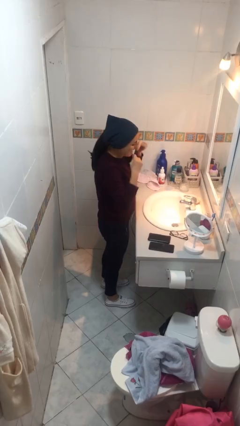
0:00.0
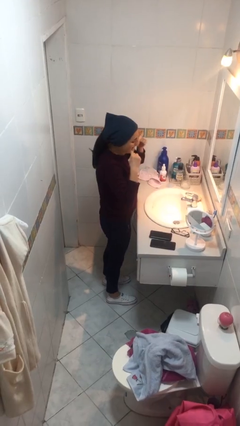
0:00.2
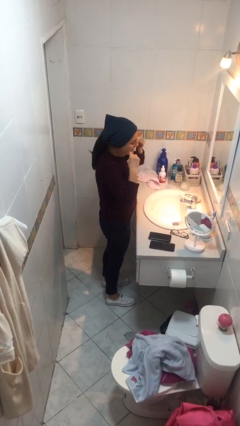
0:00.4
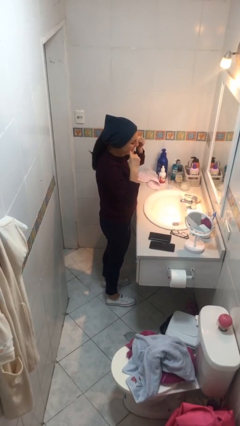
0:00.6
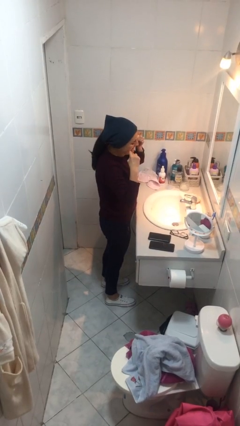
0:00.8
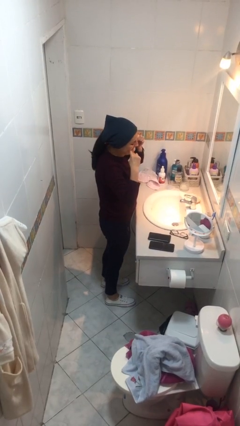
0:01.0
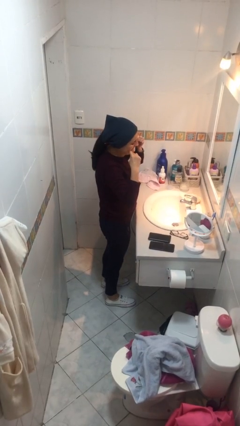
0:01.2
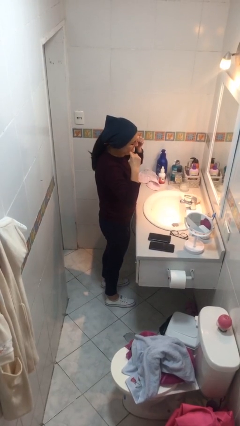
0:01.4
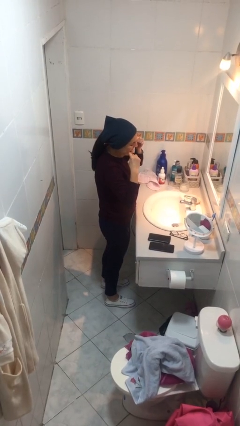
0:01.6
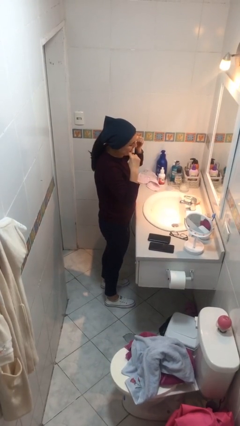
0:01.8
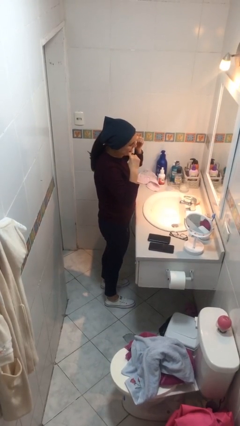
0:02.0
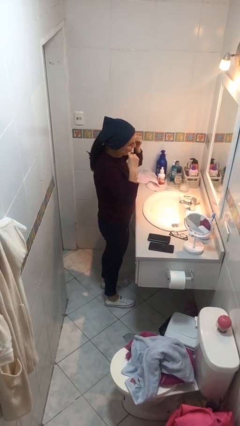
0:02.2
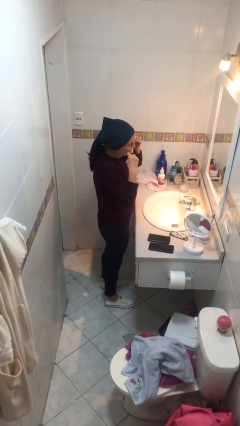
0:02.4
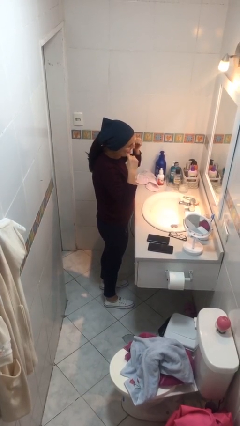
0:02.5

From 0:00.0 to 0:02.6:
person flosses

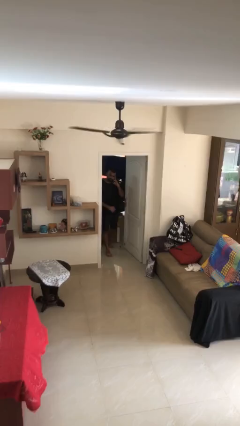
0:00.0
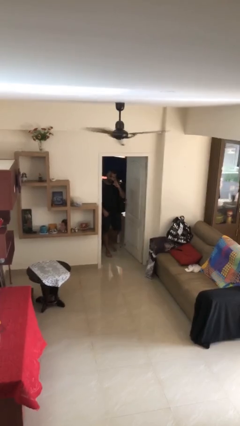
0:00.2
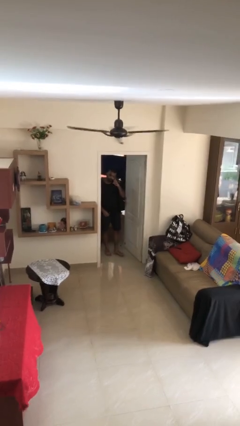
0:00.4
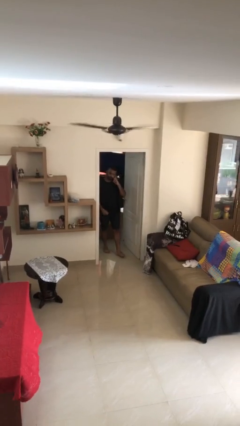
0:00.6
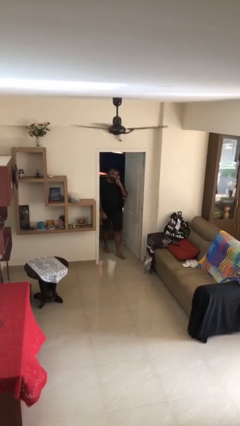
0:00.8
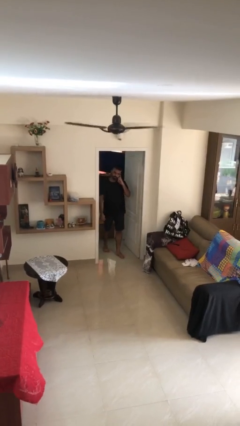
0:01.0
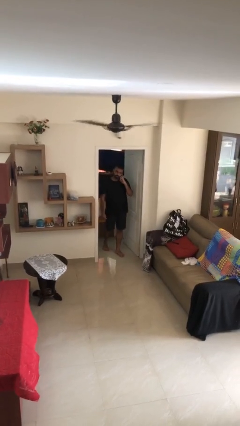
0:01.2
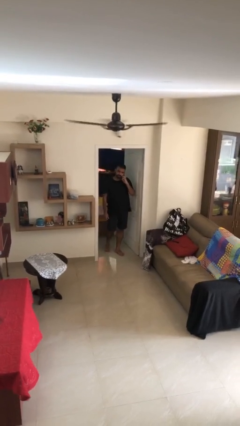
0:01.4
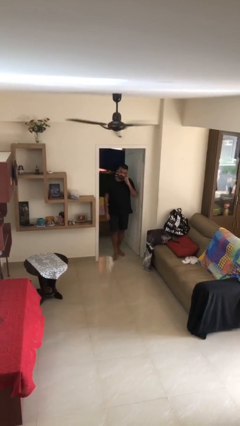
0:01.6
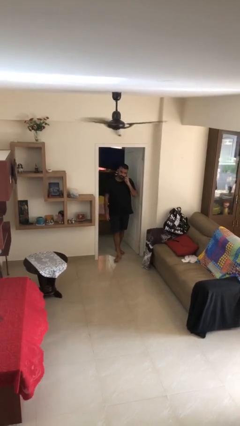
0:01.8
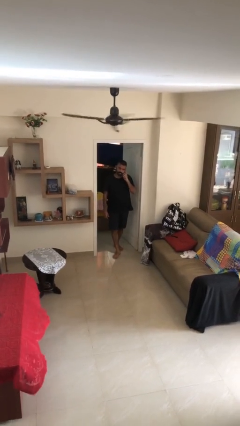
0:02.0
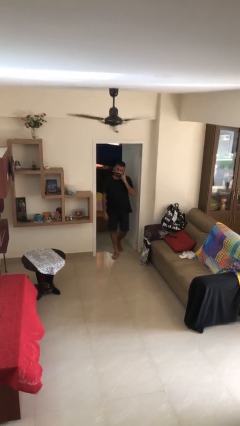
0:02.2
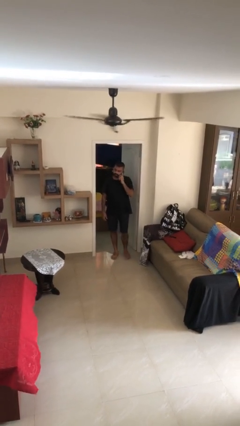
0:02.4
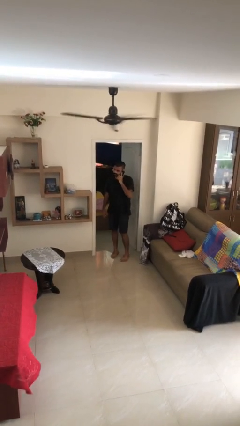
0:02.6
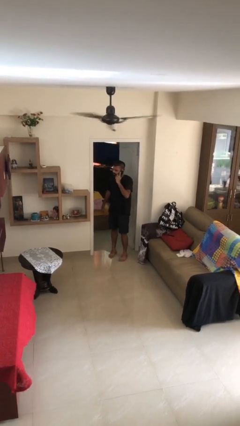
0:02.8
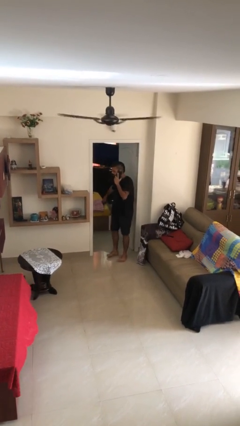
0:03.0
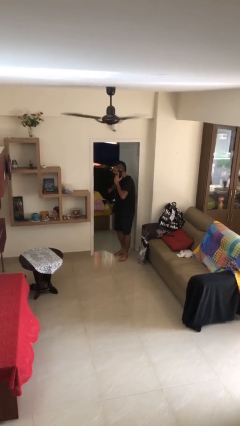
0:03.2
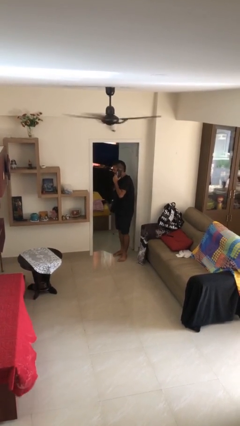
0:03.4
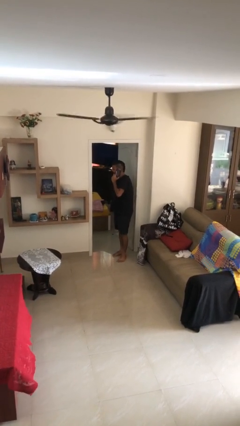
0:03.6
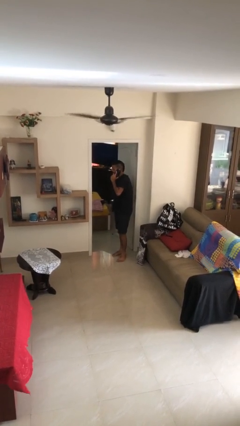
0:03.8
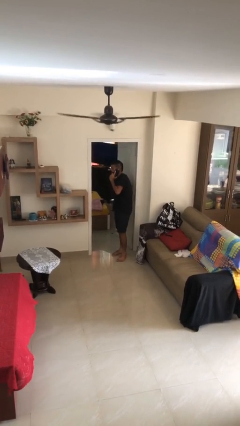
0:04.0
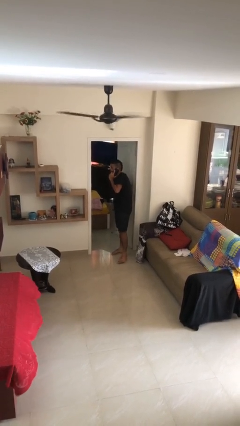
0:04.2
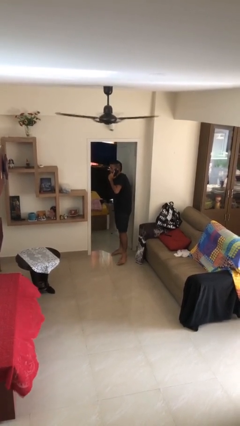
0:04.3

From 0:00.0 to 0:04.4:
person enters scene through structure

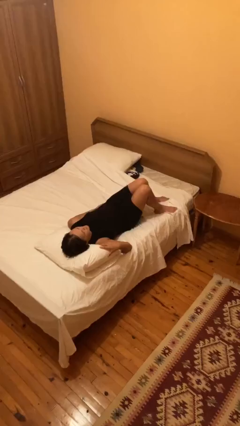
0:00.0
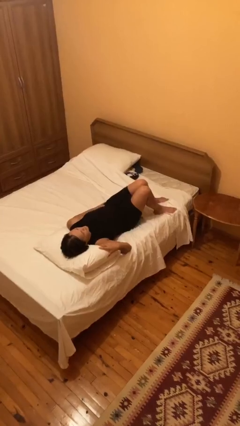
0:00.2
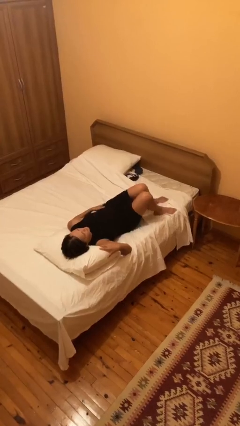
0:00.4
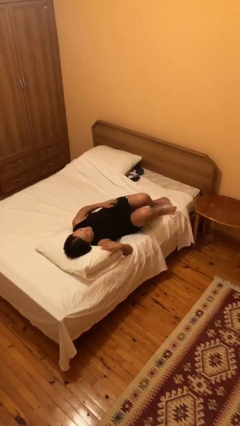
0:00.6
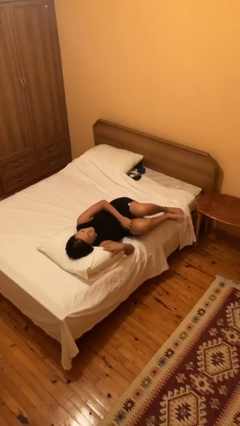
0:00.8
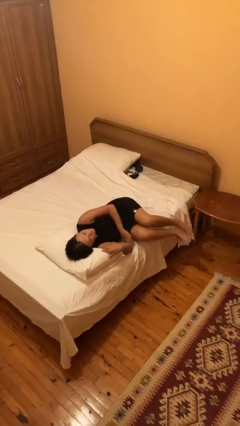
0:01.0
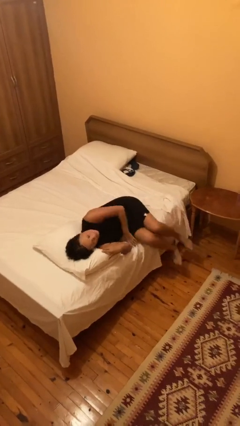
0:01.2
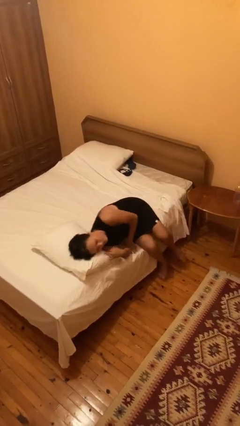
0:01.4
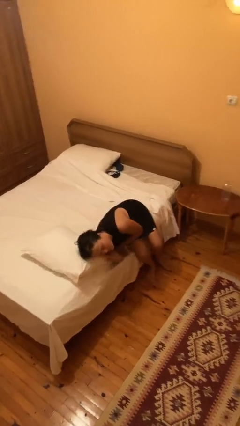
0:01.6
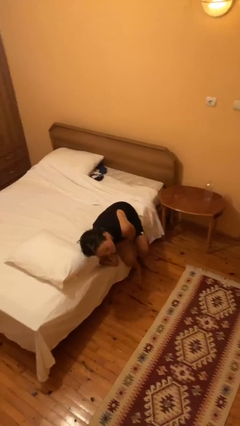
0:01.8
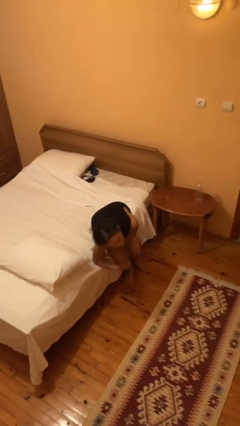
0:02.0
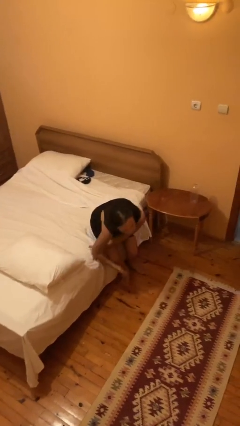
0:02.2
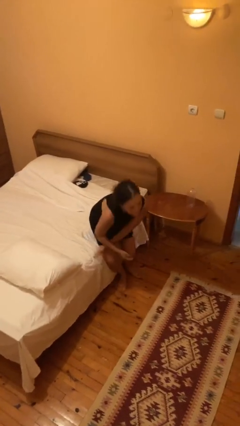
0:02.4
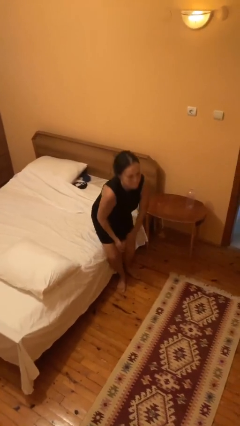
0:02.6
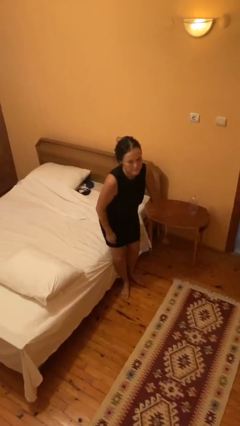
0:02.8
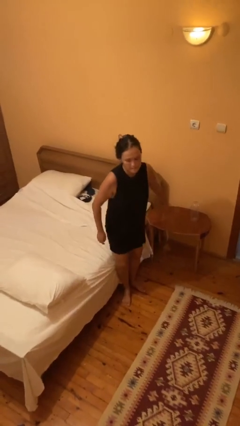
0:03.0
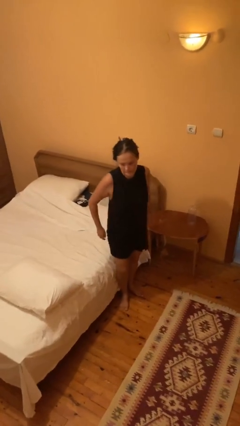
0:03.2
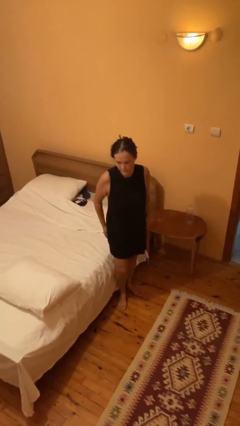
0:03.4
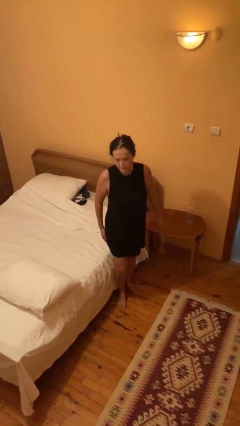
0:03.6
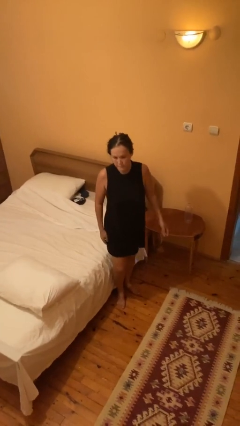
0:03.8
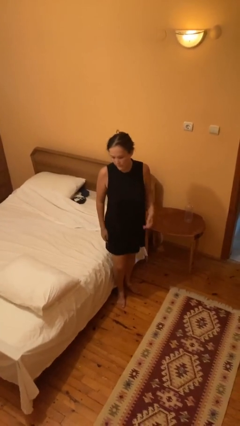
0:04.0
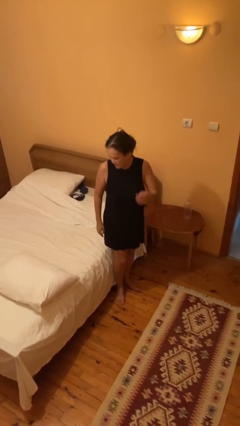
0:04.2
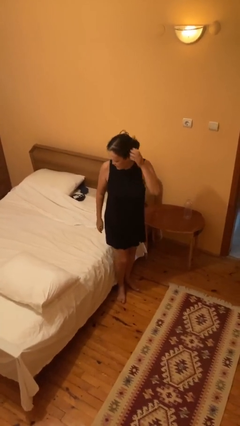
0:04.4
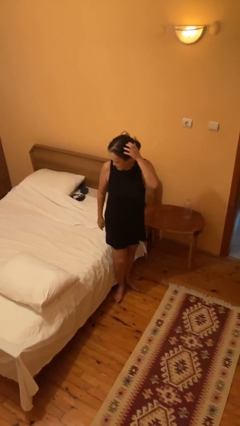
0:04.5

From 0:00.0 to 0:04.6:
person stands up

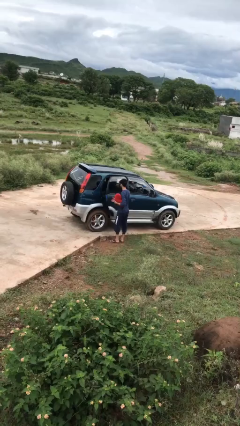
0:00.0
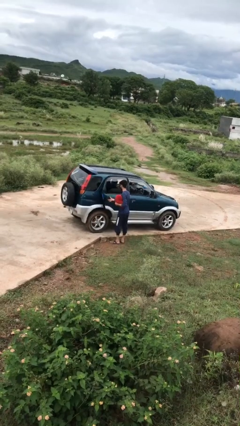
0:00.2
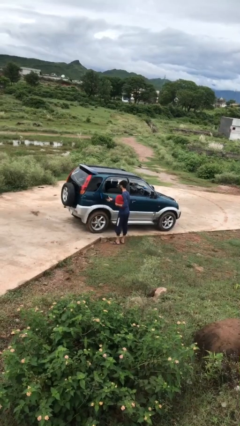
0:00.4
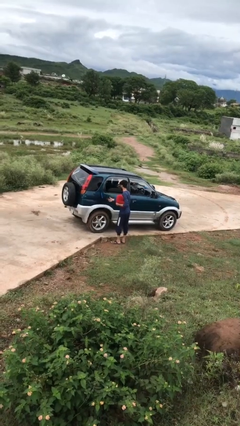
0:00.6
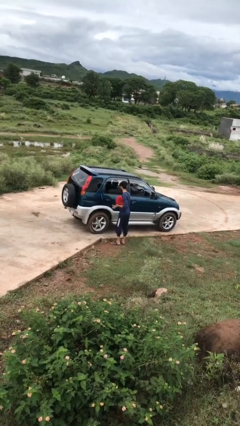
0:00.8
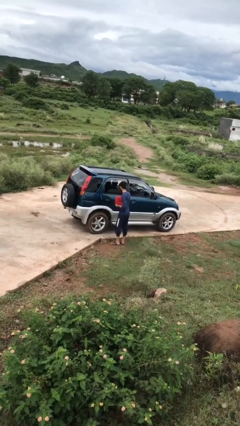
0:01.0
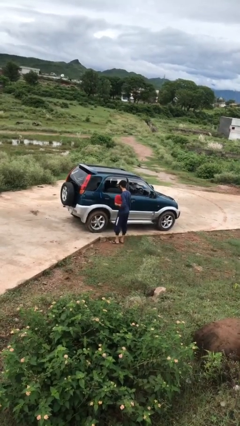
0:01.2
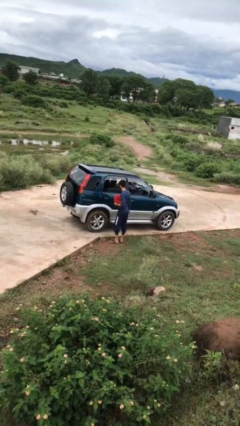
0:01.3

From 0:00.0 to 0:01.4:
person closes car door

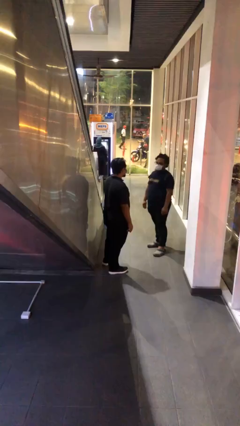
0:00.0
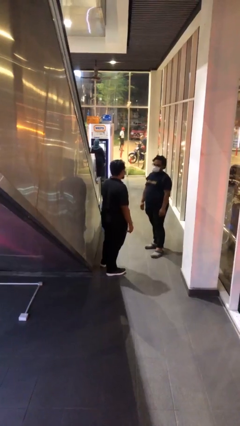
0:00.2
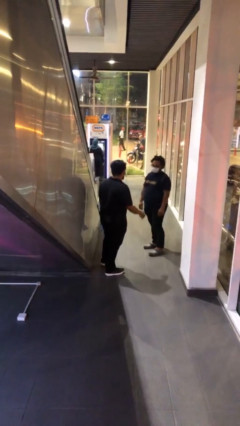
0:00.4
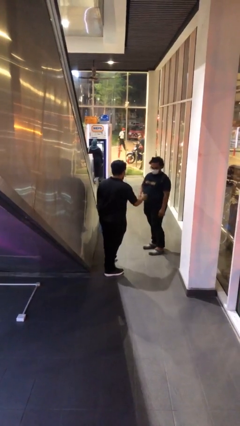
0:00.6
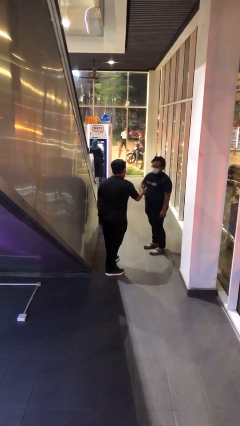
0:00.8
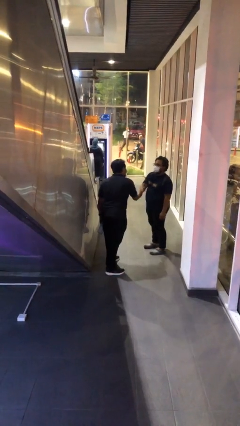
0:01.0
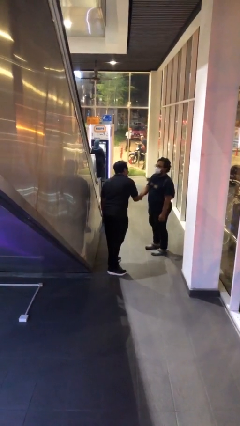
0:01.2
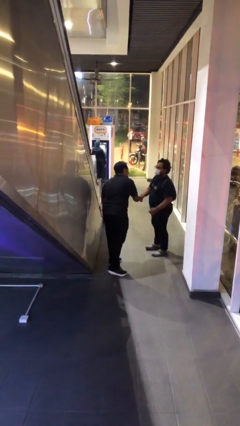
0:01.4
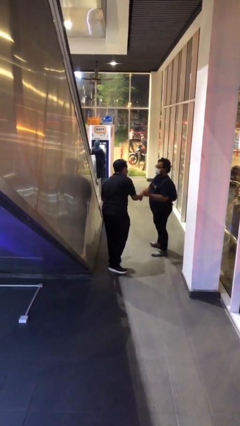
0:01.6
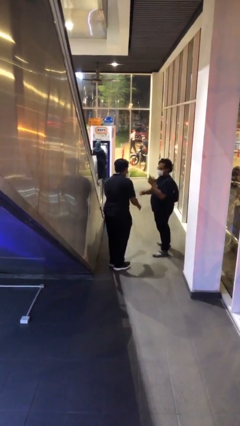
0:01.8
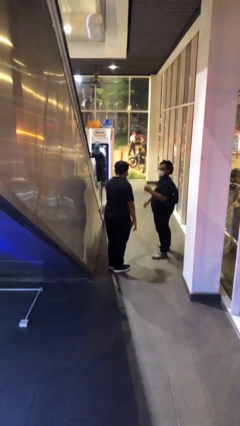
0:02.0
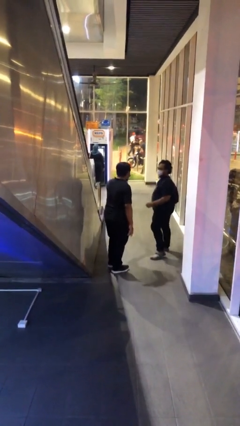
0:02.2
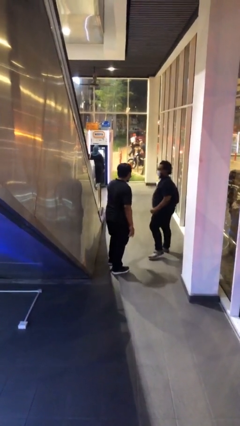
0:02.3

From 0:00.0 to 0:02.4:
person shakes hand

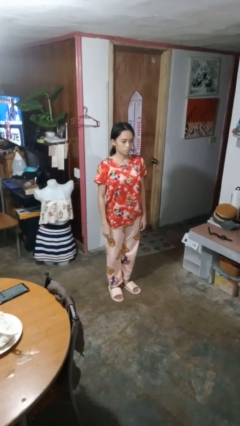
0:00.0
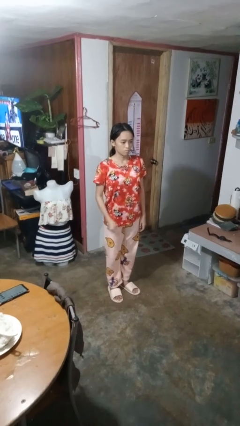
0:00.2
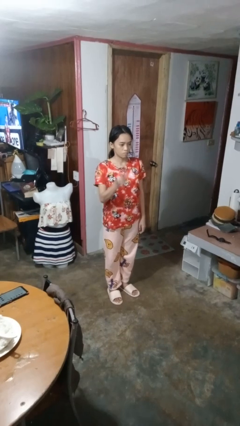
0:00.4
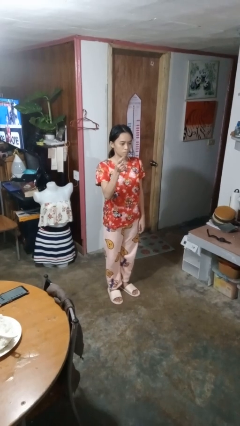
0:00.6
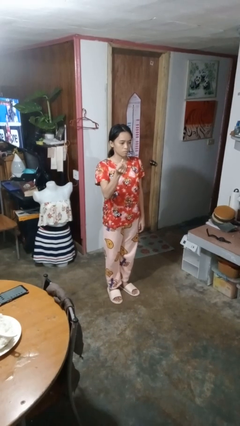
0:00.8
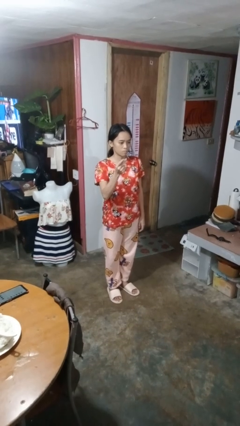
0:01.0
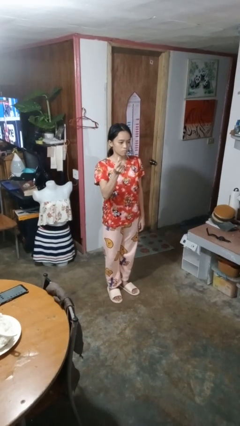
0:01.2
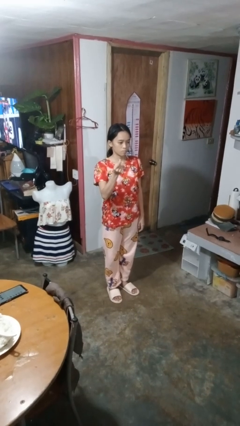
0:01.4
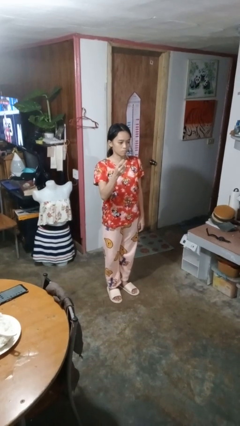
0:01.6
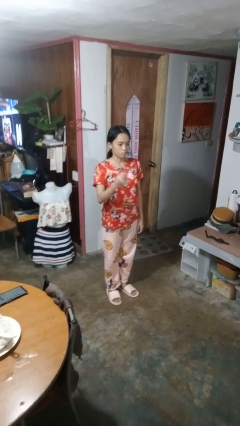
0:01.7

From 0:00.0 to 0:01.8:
person snaps fingers

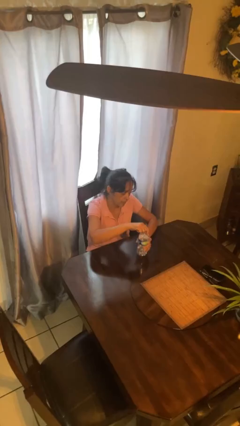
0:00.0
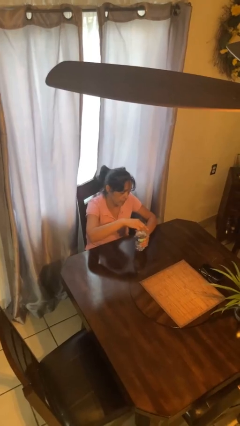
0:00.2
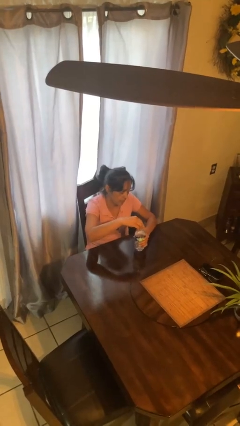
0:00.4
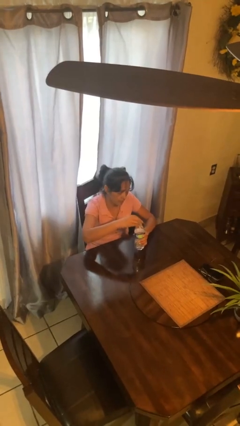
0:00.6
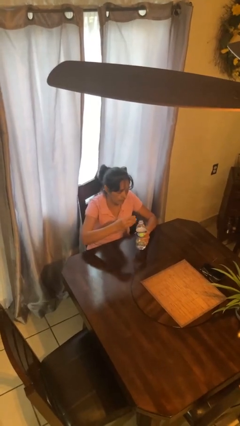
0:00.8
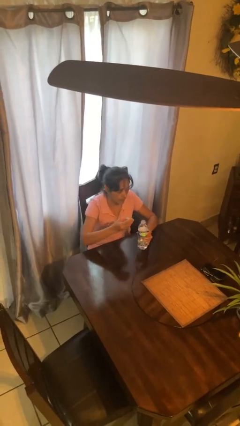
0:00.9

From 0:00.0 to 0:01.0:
person unscrews lid from bottle
